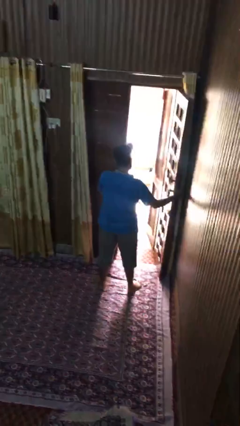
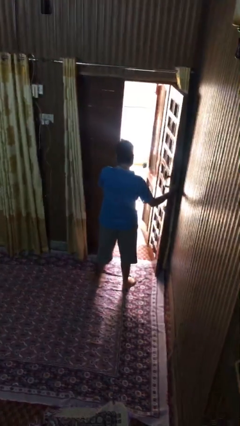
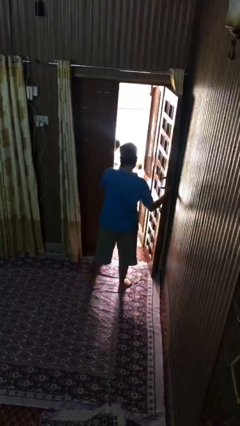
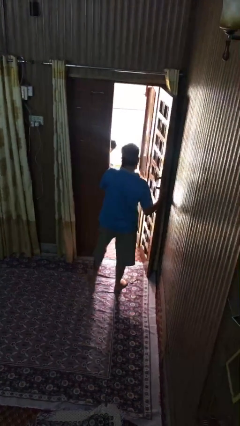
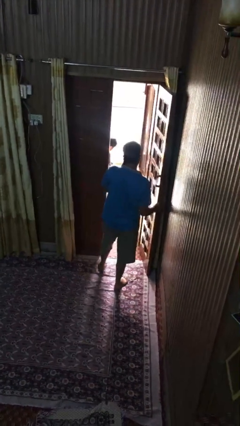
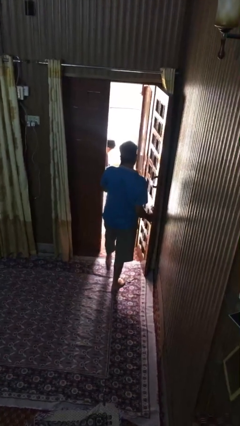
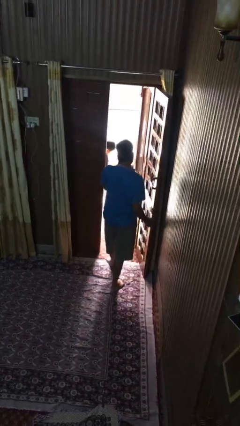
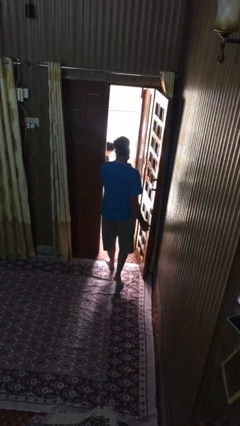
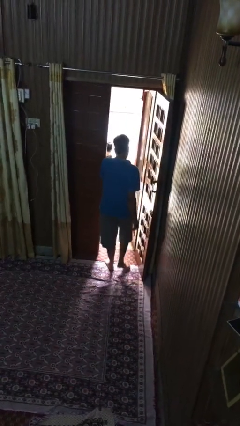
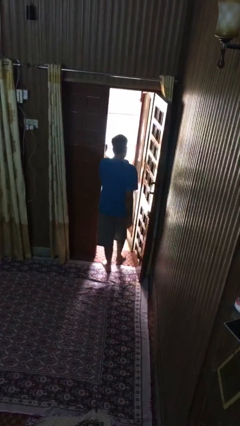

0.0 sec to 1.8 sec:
person opens facility door

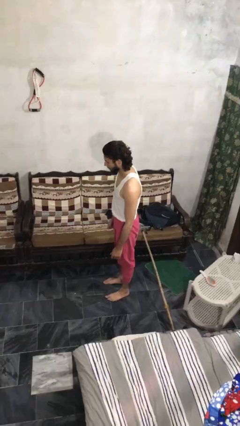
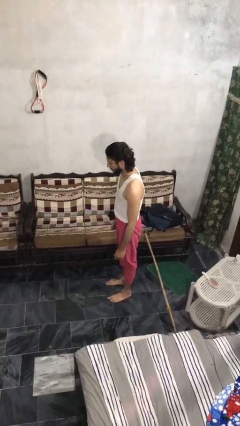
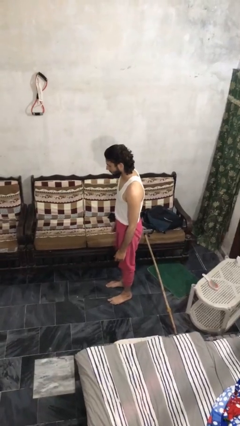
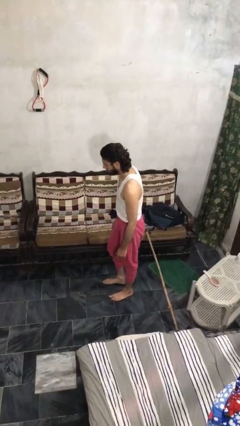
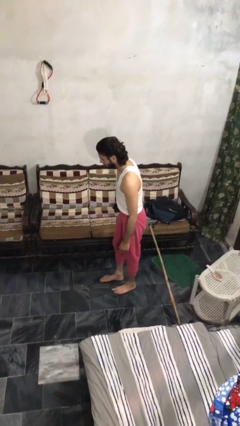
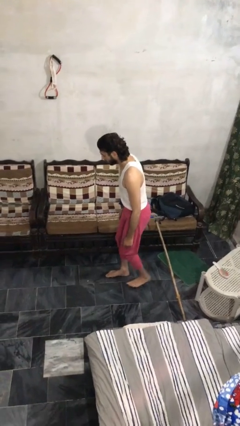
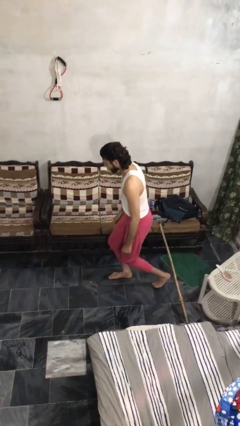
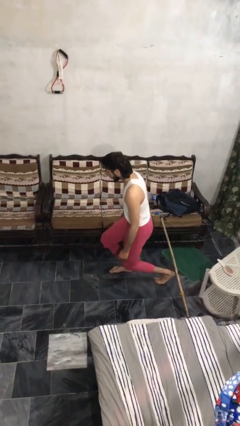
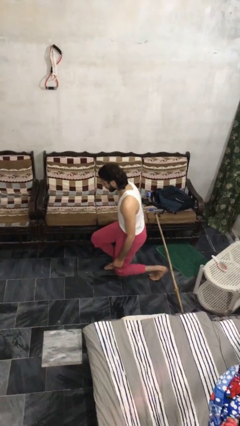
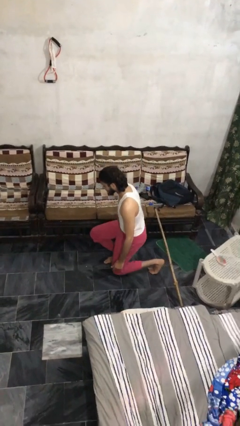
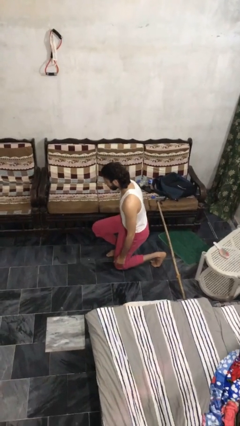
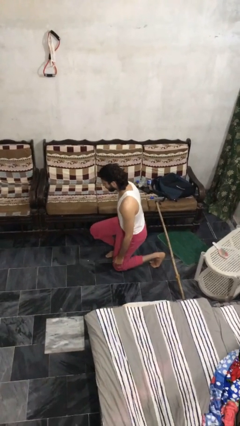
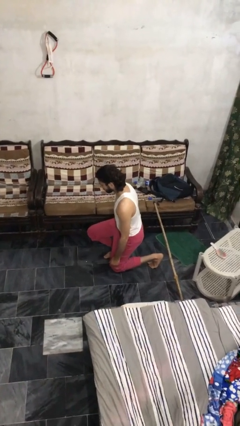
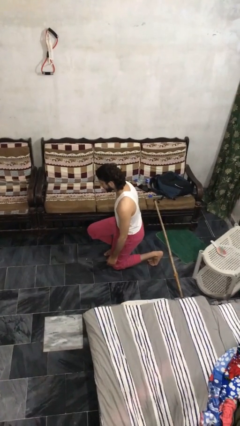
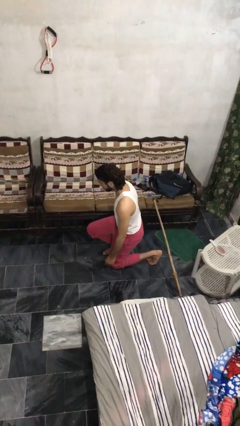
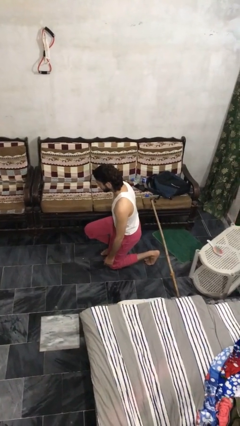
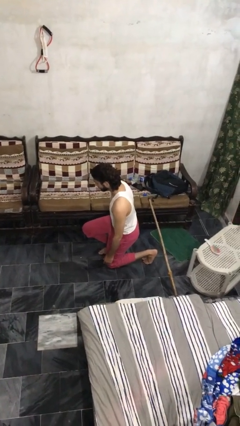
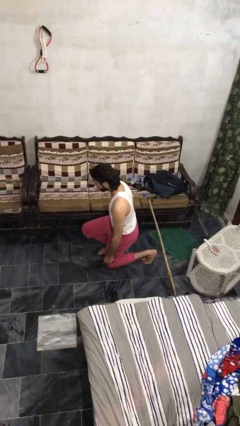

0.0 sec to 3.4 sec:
person kneels

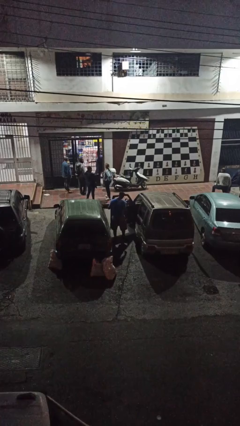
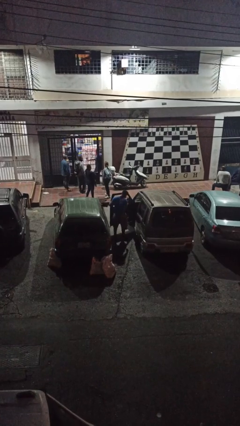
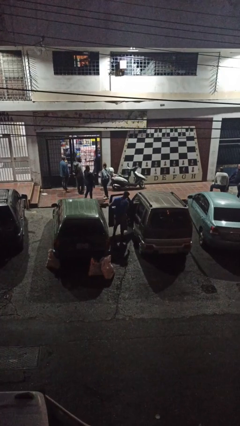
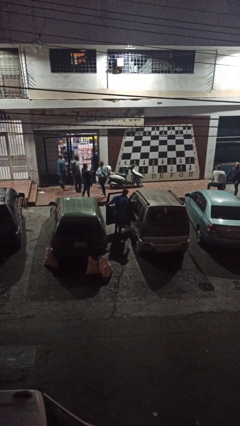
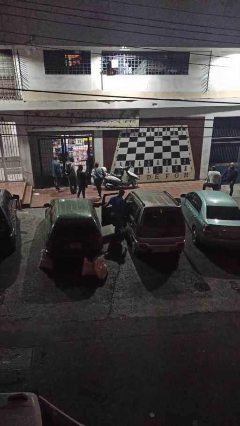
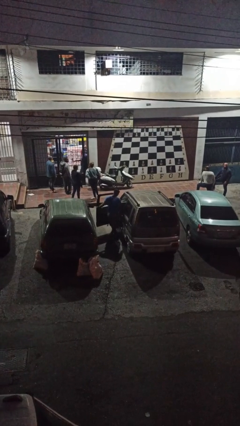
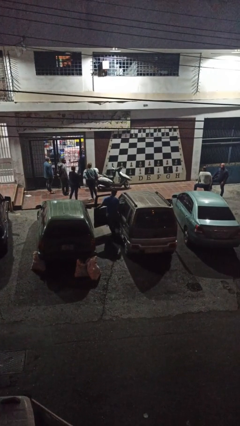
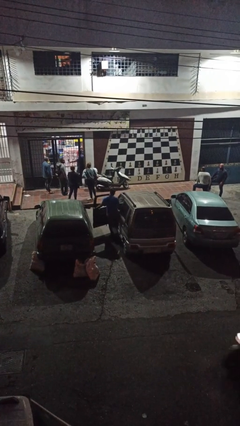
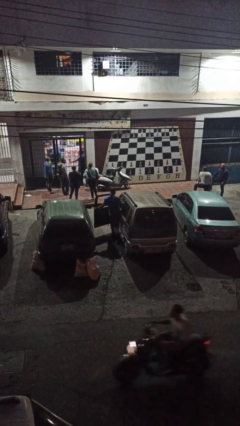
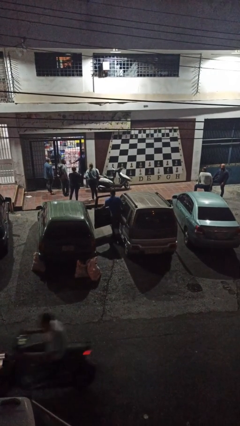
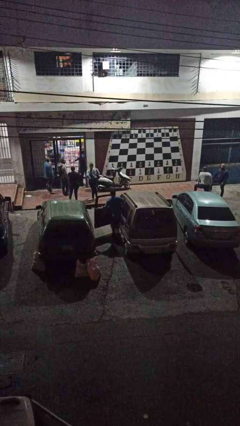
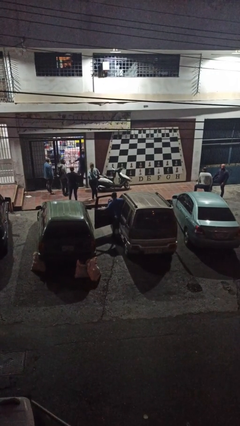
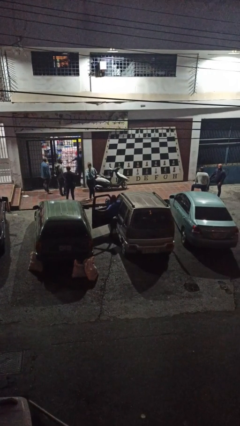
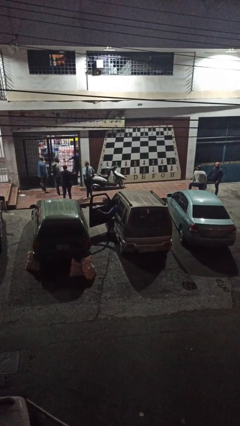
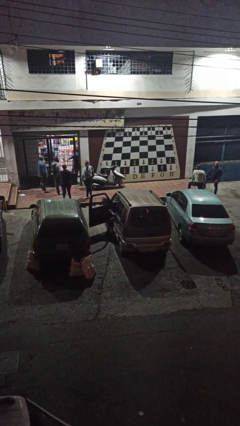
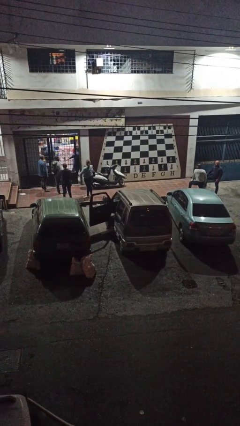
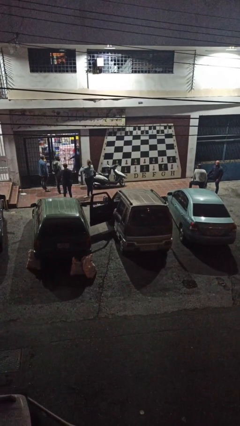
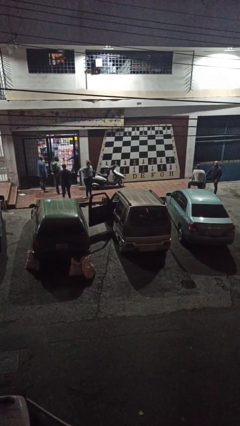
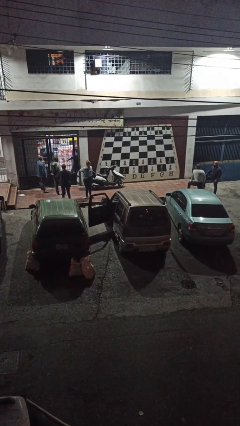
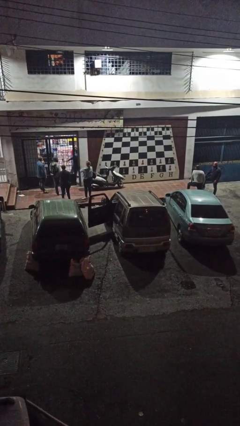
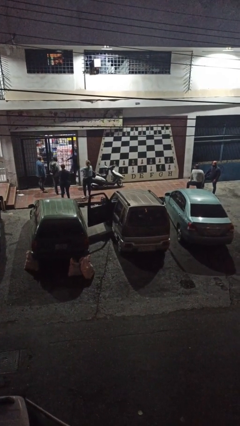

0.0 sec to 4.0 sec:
person enters car

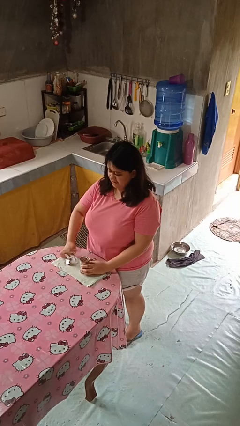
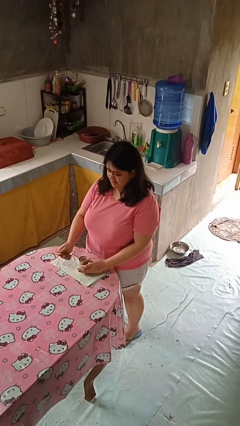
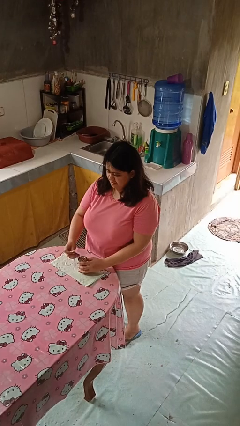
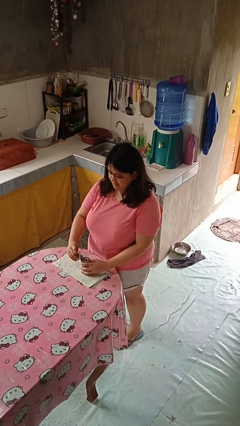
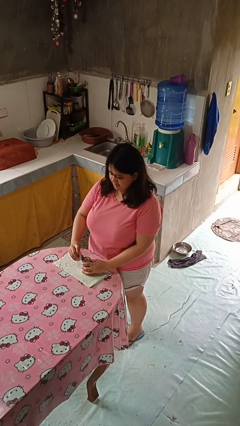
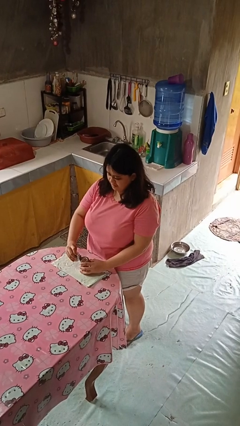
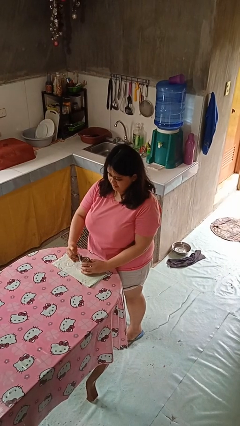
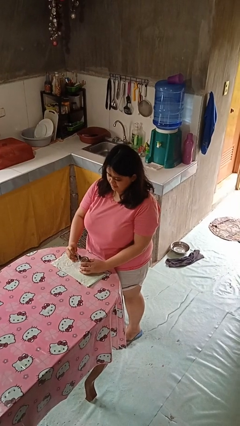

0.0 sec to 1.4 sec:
person opens can with can opener

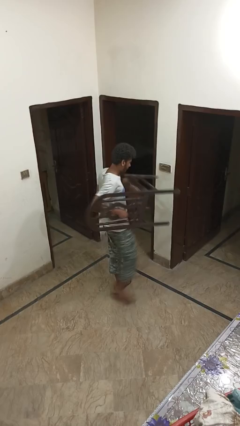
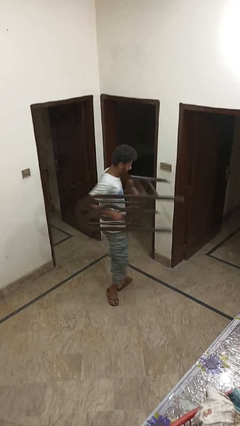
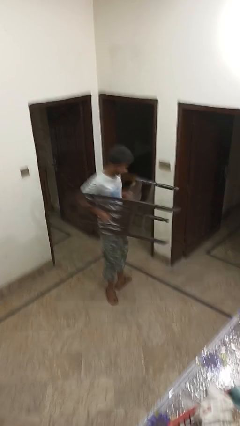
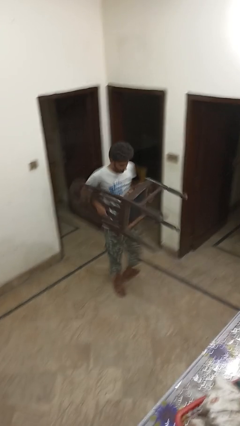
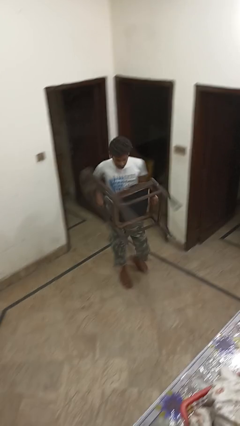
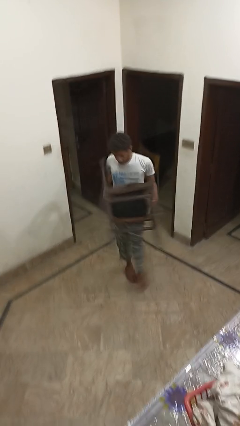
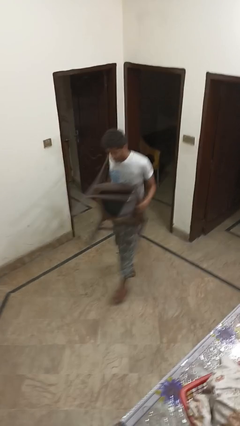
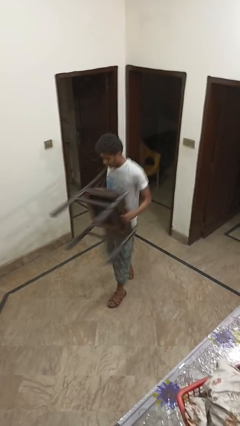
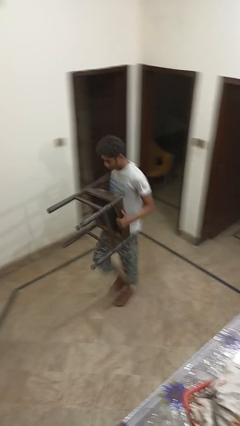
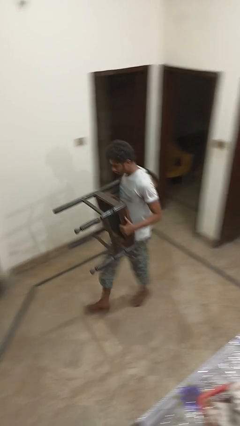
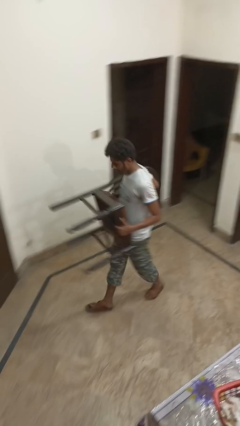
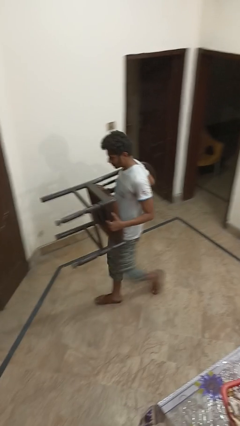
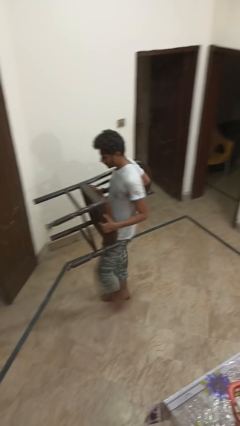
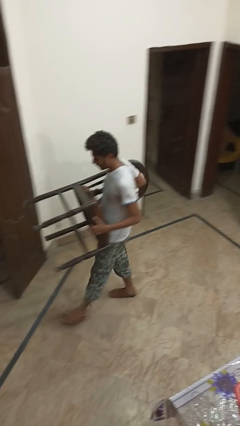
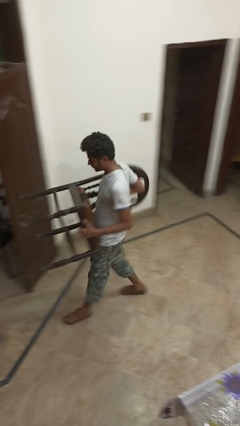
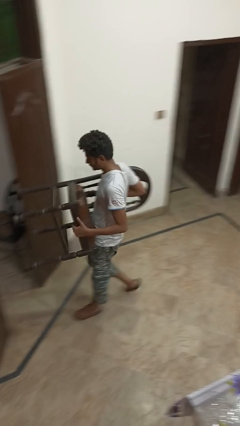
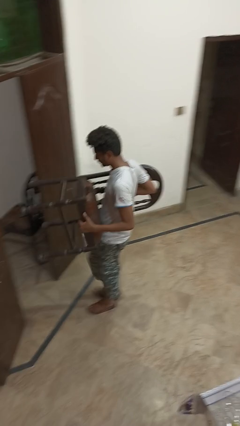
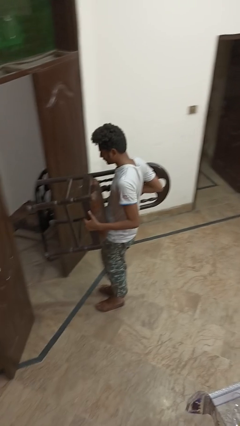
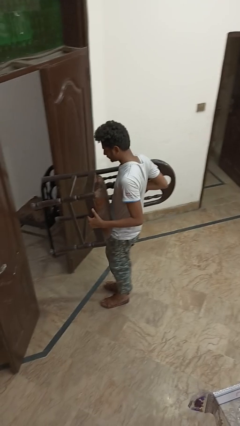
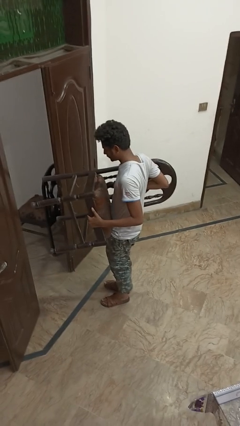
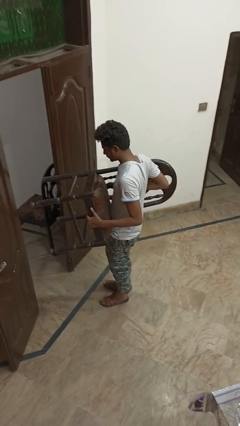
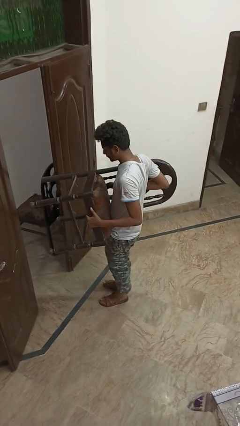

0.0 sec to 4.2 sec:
person carries furniture

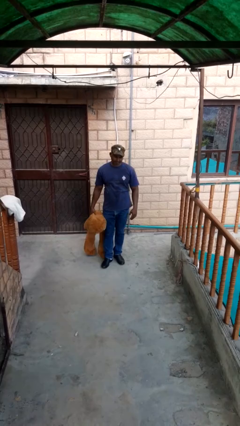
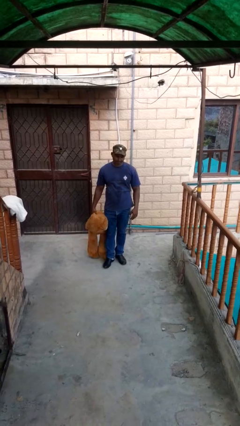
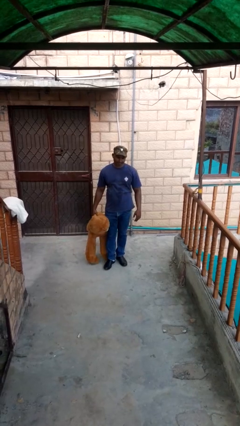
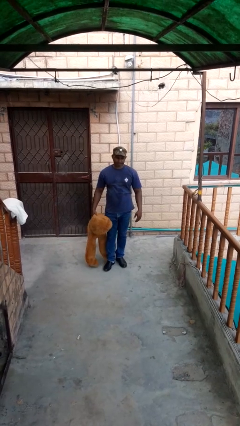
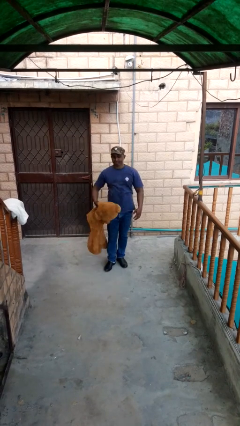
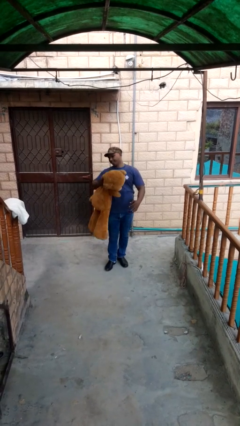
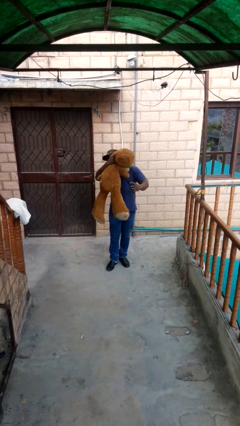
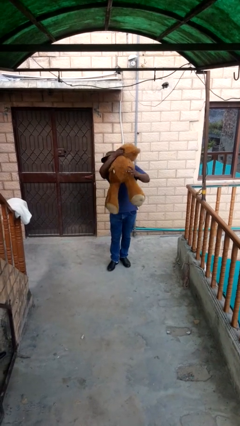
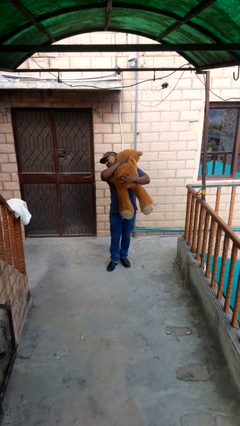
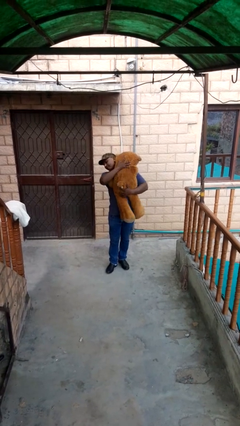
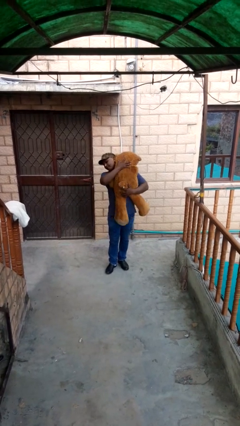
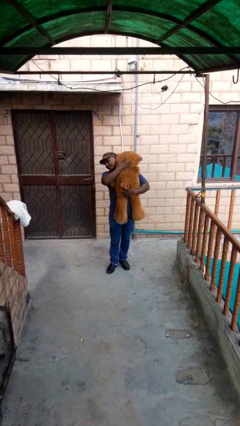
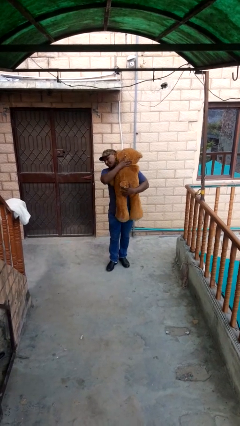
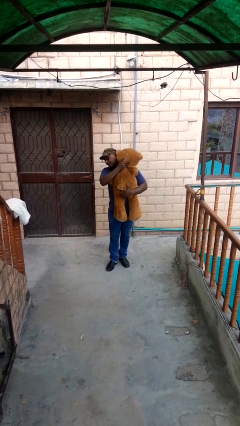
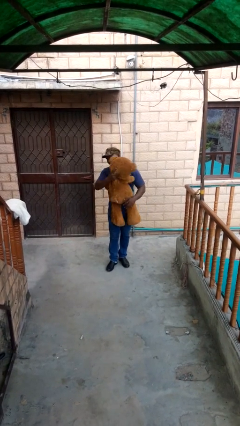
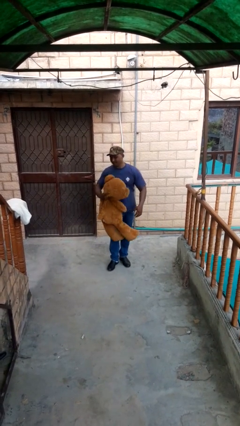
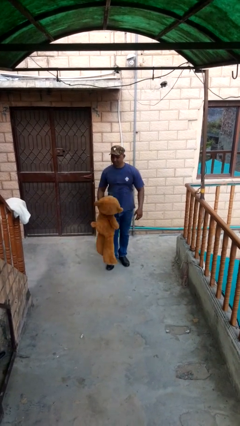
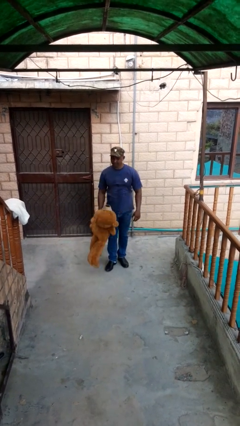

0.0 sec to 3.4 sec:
person hugs stuffed animal
